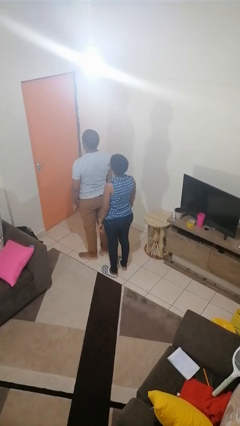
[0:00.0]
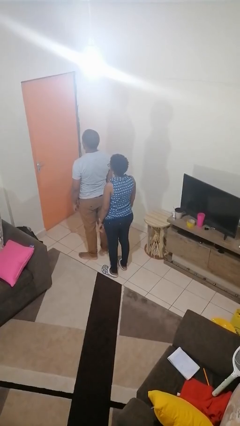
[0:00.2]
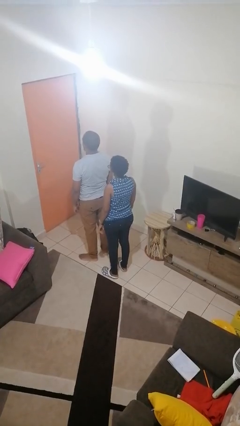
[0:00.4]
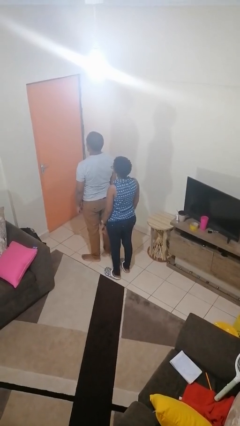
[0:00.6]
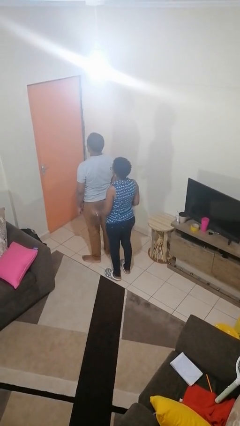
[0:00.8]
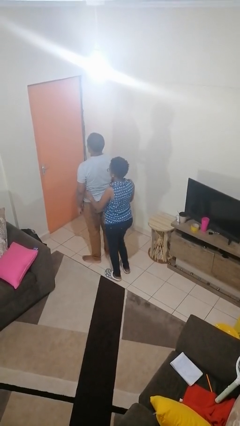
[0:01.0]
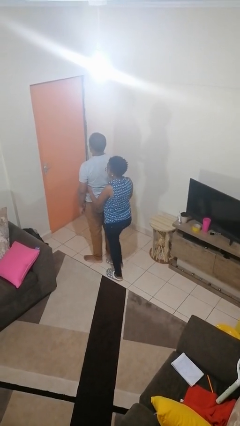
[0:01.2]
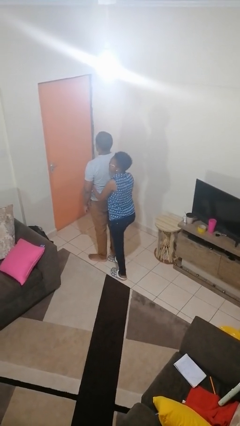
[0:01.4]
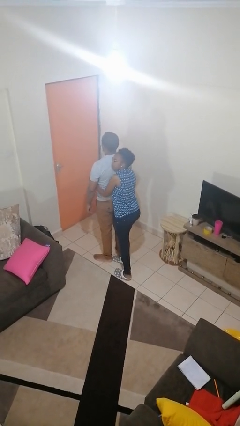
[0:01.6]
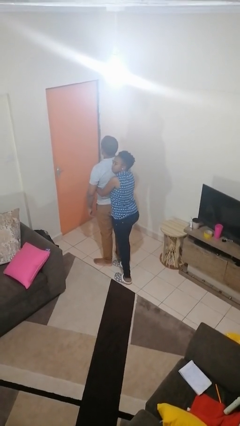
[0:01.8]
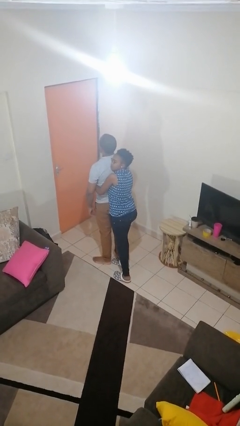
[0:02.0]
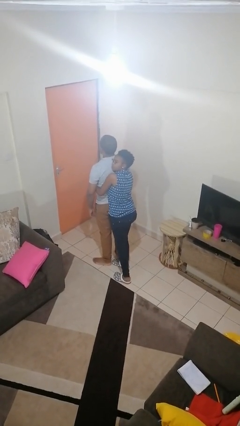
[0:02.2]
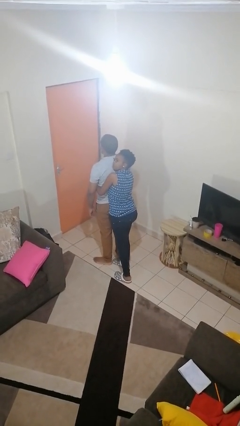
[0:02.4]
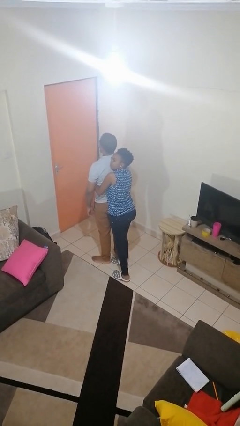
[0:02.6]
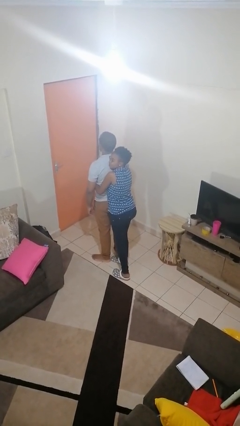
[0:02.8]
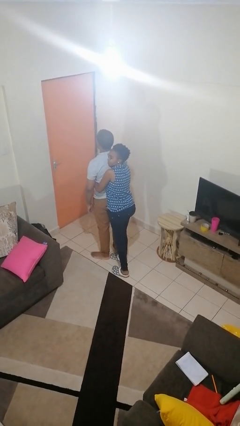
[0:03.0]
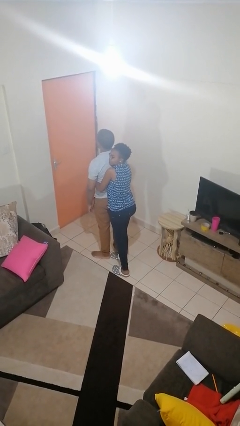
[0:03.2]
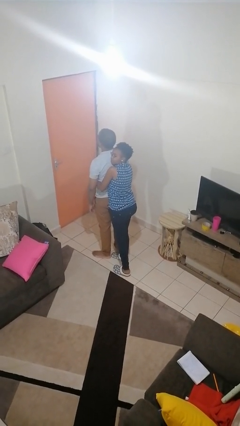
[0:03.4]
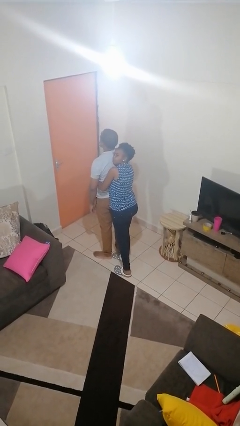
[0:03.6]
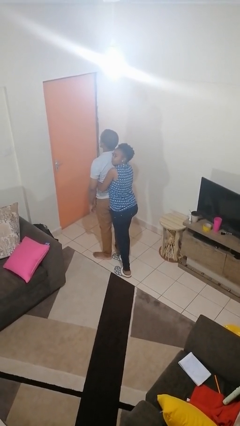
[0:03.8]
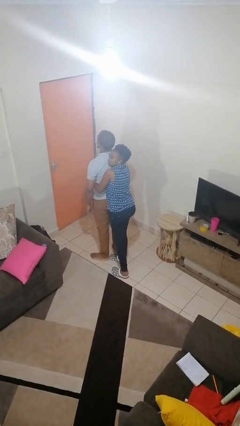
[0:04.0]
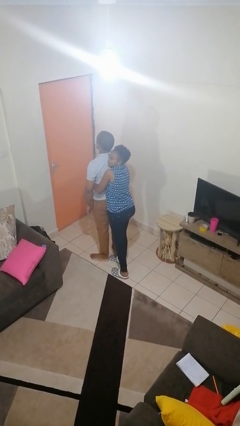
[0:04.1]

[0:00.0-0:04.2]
person hugs person from behind

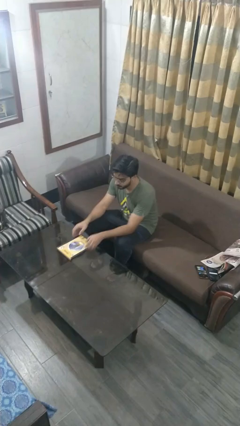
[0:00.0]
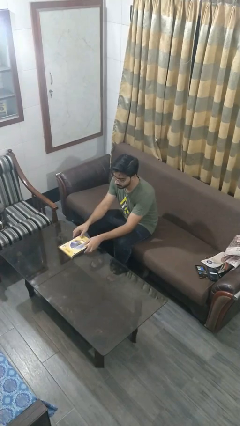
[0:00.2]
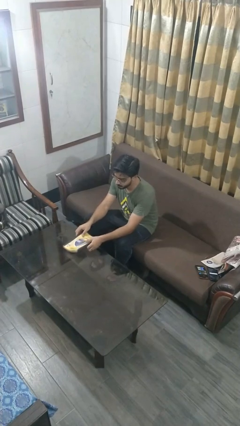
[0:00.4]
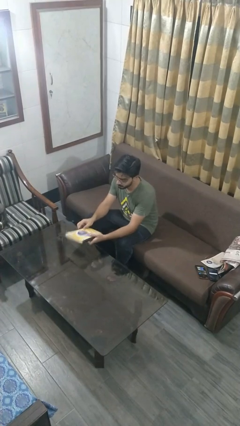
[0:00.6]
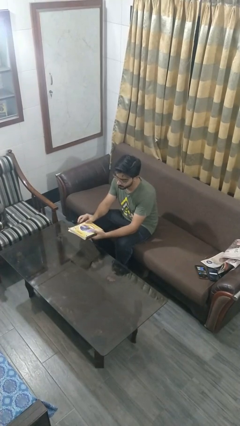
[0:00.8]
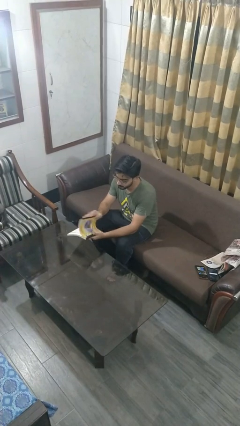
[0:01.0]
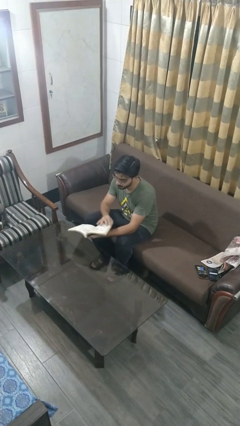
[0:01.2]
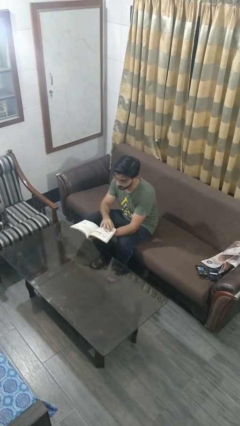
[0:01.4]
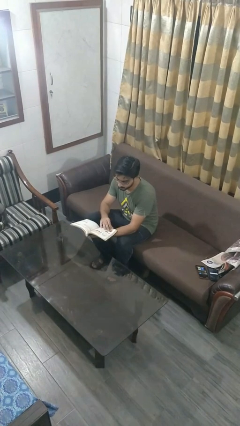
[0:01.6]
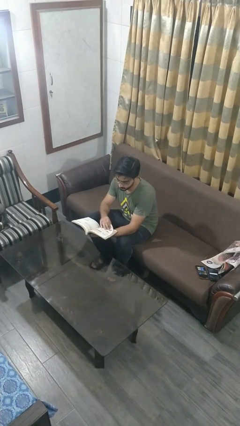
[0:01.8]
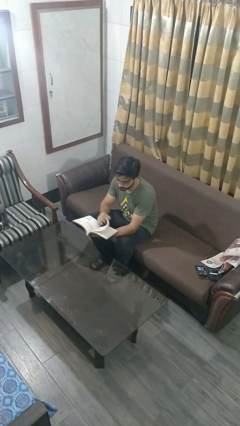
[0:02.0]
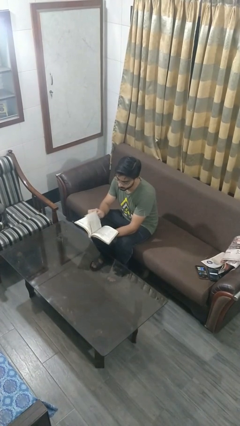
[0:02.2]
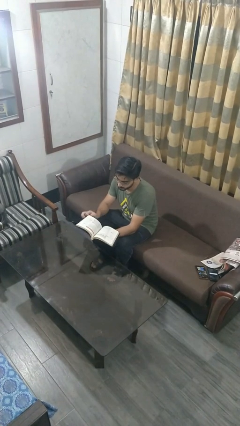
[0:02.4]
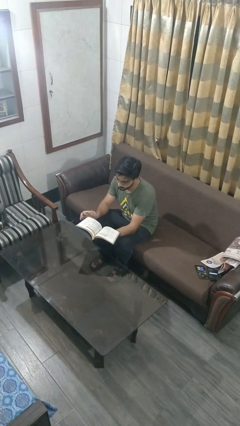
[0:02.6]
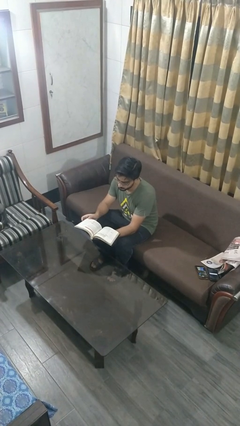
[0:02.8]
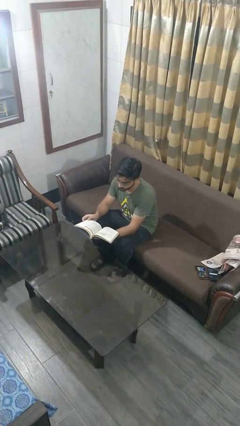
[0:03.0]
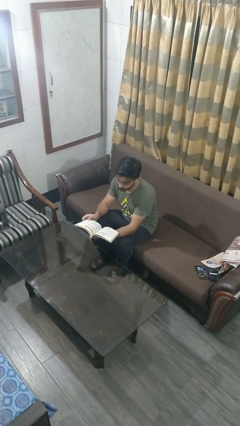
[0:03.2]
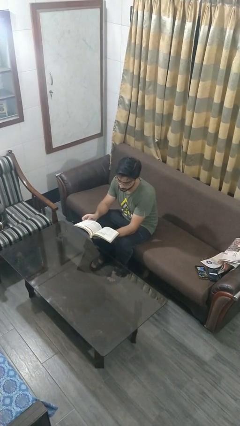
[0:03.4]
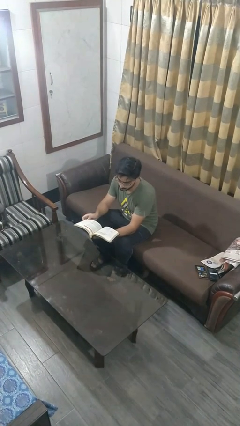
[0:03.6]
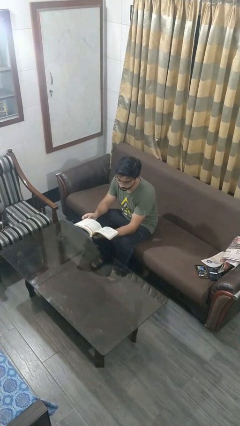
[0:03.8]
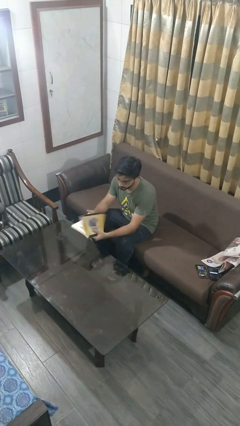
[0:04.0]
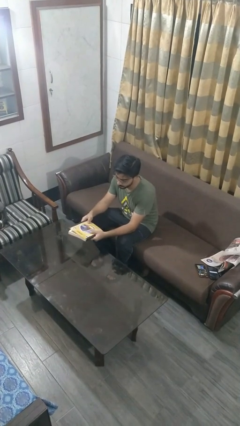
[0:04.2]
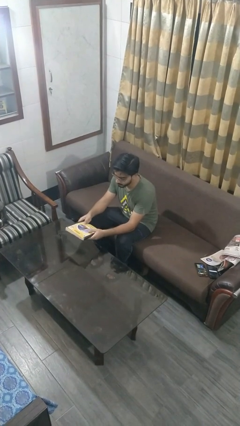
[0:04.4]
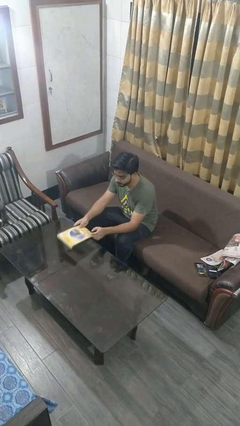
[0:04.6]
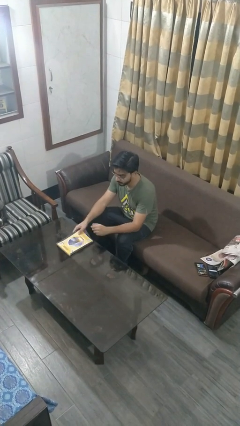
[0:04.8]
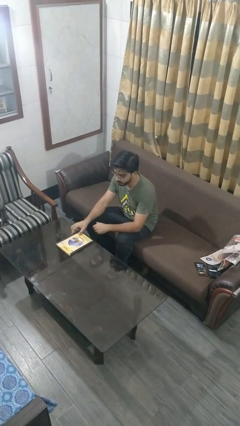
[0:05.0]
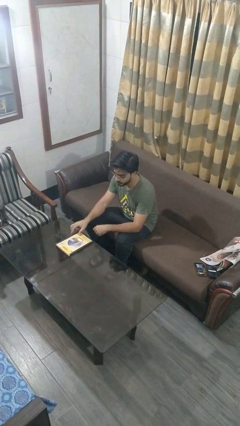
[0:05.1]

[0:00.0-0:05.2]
person reads book

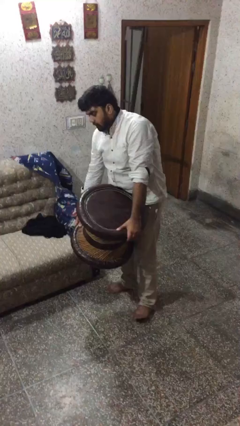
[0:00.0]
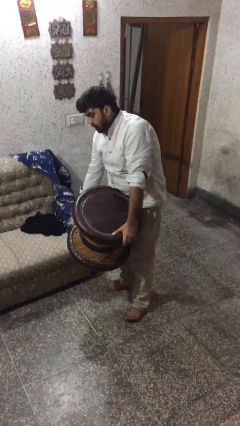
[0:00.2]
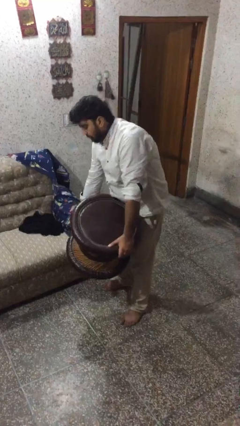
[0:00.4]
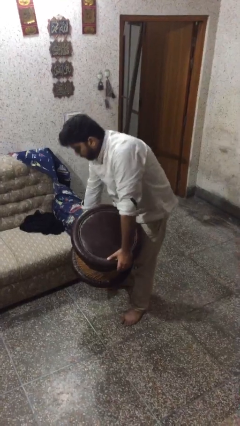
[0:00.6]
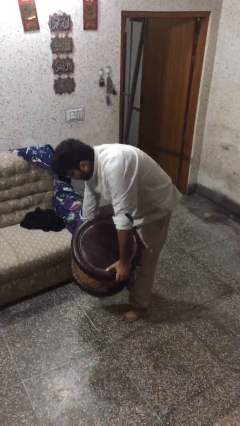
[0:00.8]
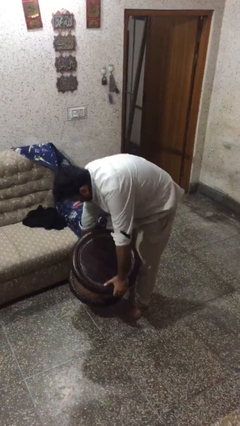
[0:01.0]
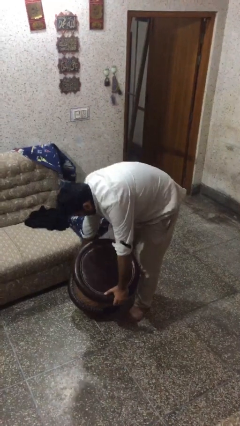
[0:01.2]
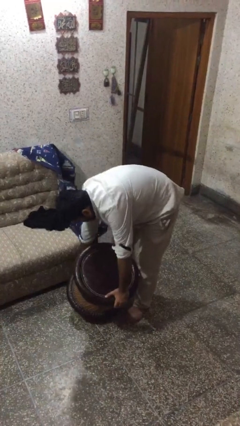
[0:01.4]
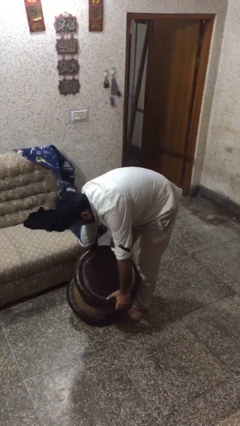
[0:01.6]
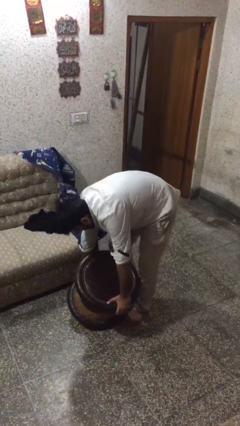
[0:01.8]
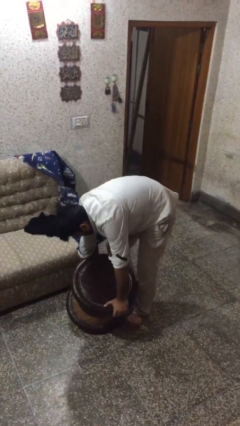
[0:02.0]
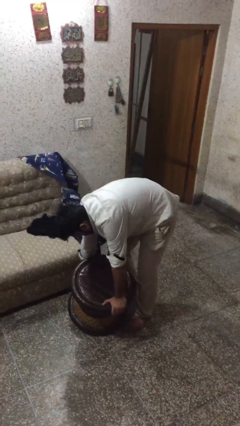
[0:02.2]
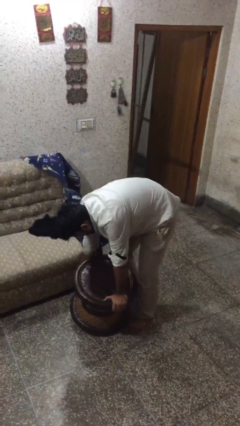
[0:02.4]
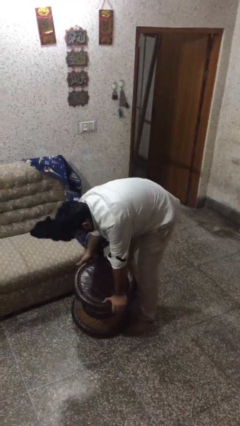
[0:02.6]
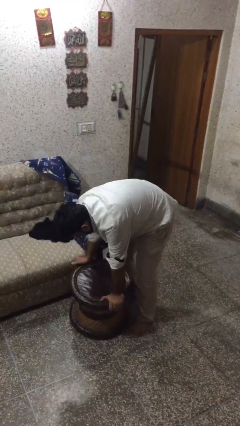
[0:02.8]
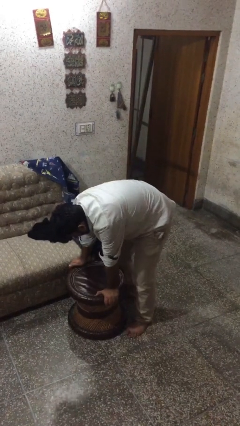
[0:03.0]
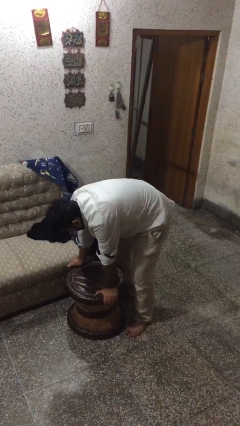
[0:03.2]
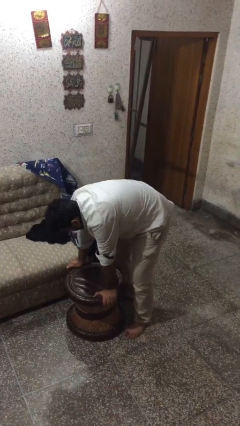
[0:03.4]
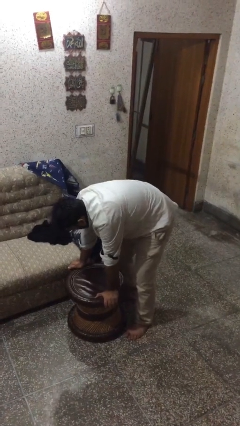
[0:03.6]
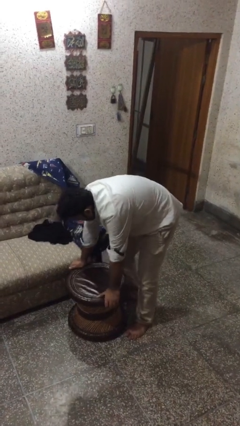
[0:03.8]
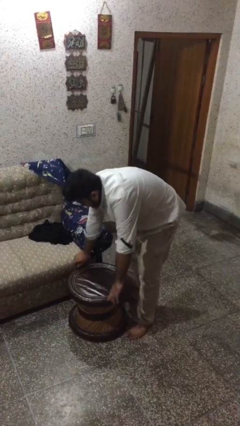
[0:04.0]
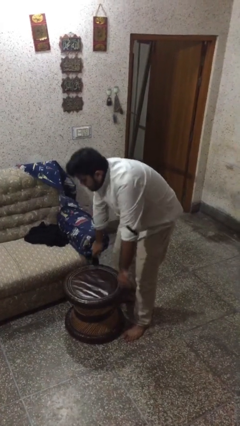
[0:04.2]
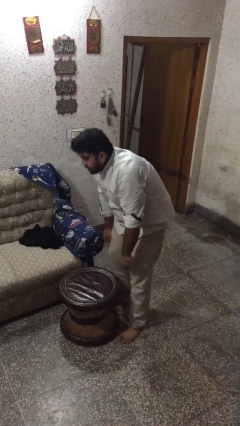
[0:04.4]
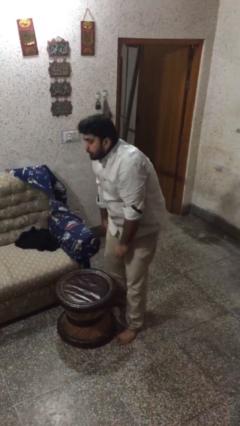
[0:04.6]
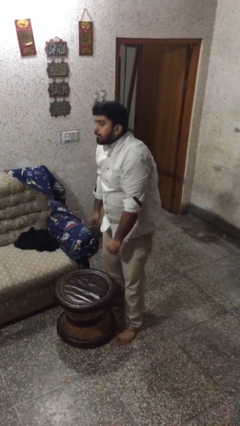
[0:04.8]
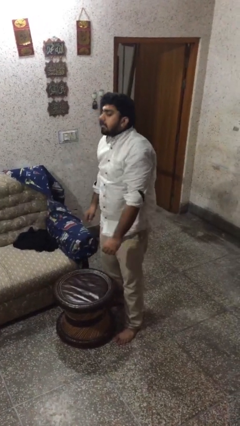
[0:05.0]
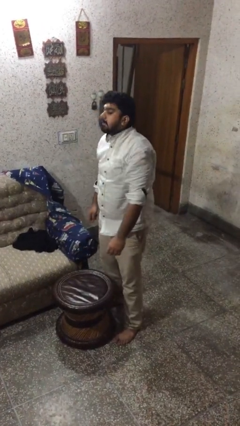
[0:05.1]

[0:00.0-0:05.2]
person puts down object on floor

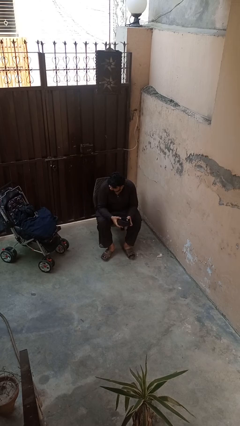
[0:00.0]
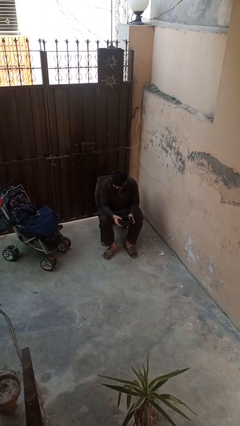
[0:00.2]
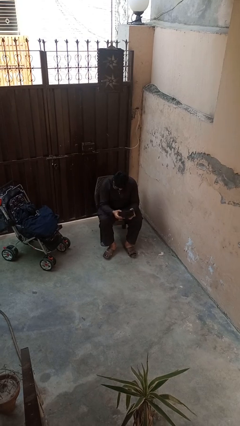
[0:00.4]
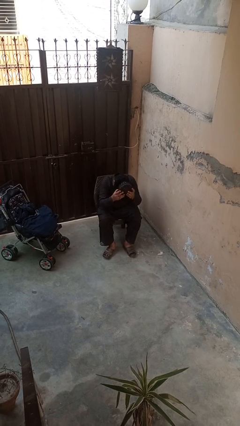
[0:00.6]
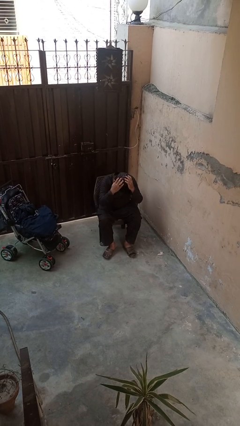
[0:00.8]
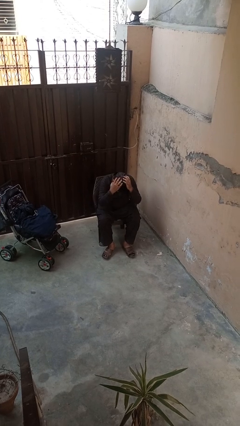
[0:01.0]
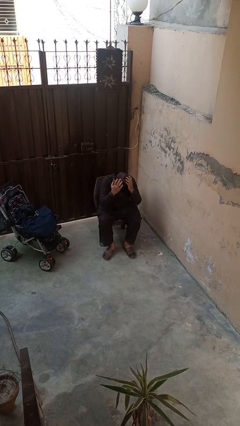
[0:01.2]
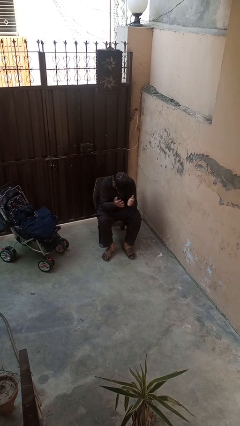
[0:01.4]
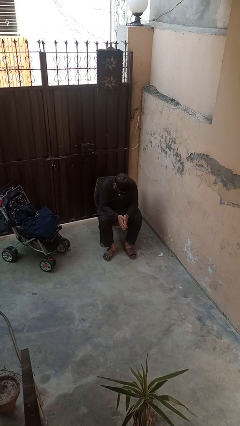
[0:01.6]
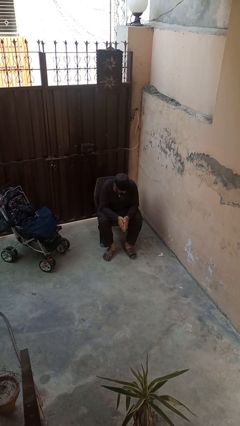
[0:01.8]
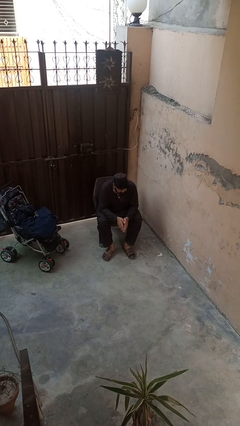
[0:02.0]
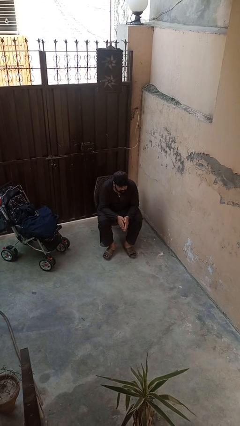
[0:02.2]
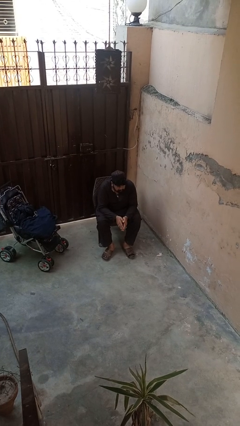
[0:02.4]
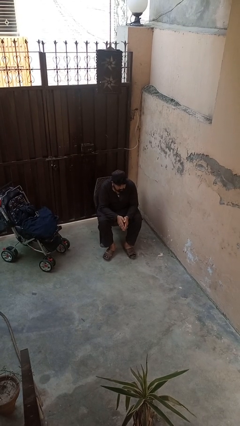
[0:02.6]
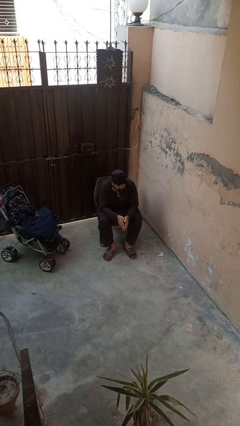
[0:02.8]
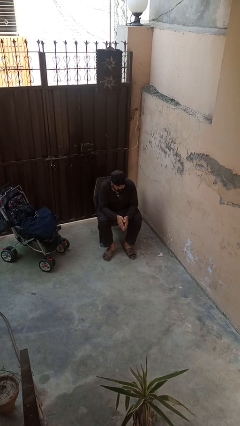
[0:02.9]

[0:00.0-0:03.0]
person puts on hat

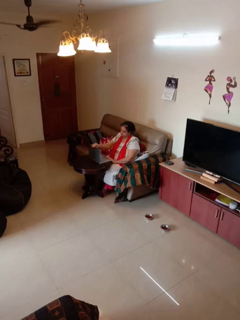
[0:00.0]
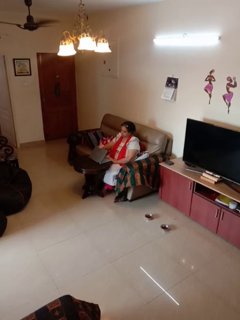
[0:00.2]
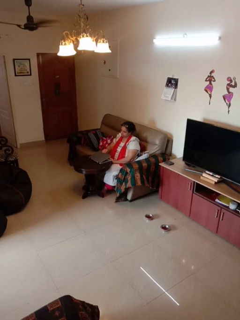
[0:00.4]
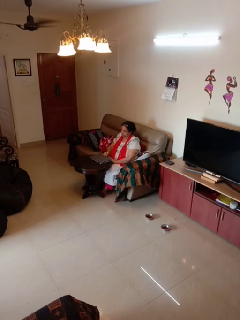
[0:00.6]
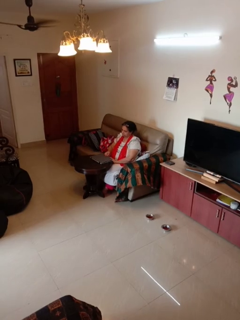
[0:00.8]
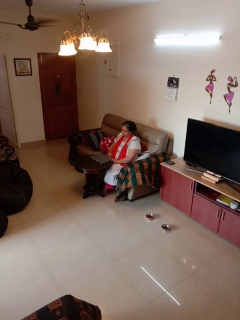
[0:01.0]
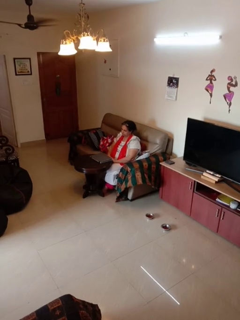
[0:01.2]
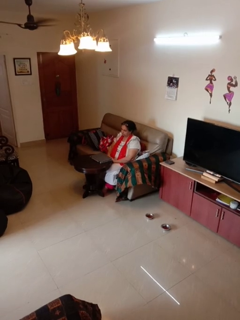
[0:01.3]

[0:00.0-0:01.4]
person closes laptop
